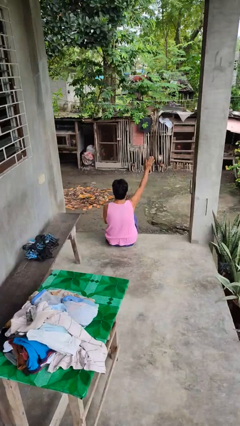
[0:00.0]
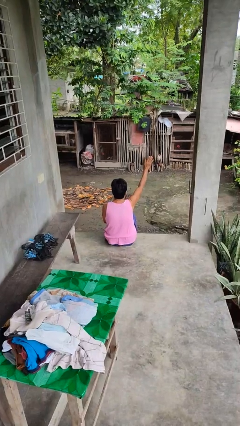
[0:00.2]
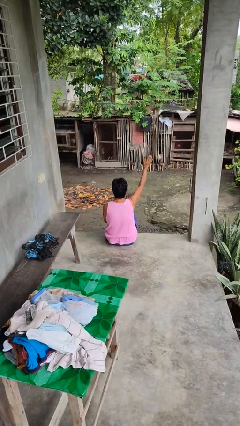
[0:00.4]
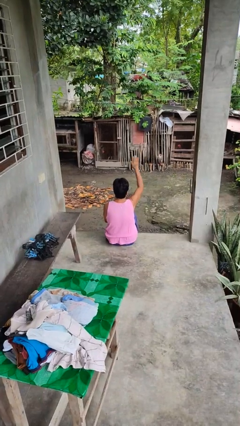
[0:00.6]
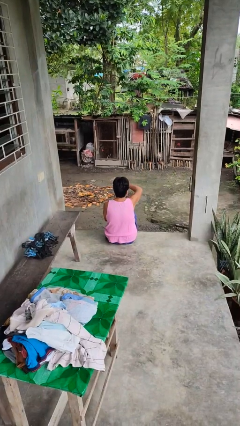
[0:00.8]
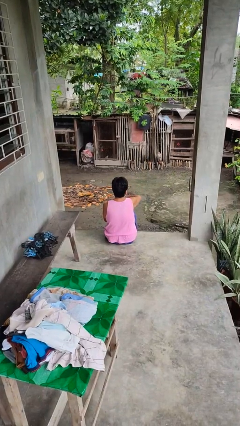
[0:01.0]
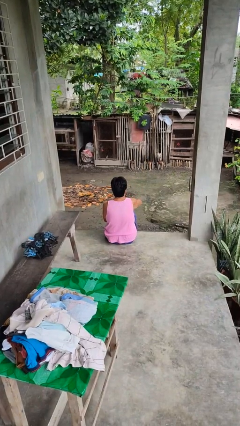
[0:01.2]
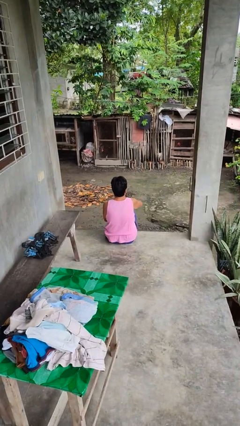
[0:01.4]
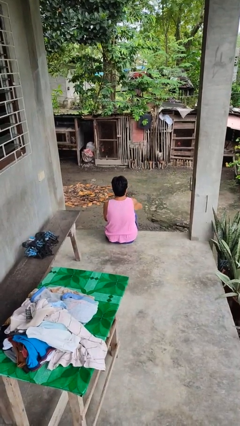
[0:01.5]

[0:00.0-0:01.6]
person gestures swipe down

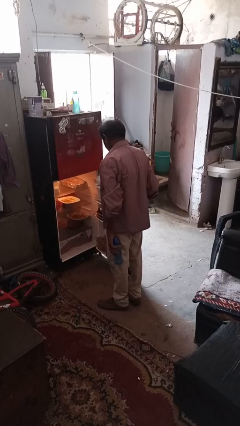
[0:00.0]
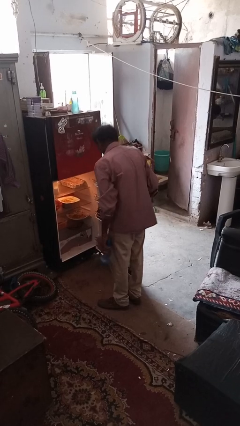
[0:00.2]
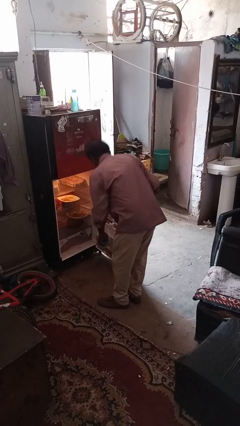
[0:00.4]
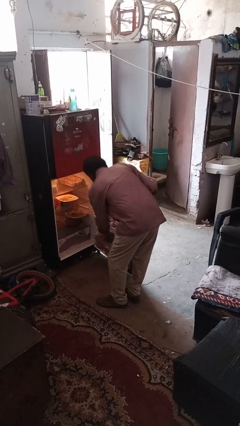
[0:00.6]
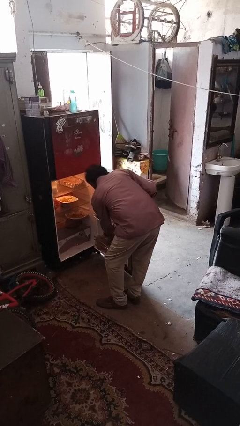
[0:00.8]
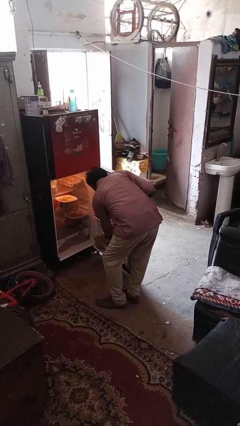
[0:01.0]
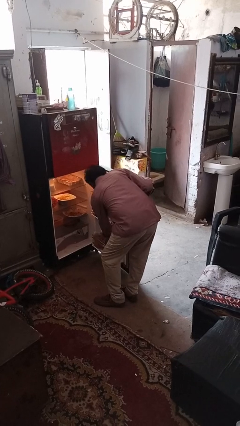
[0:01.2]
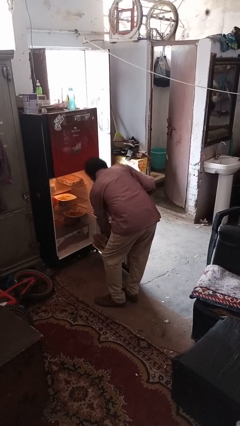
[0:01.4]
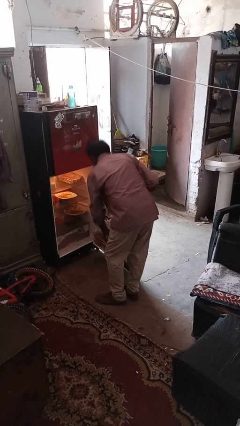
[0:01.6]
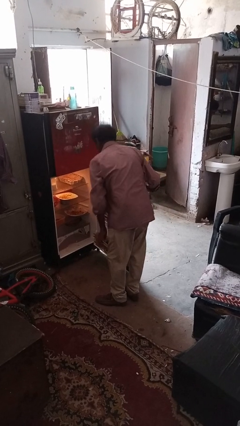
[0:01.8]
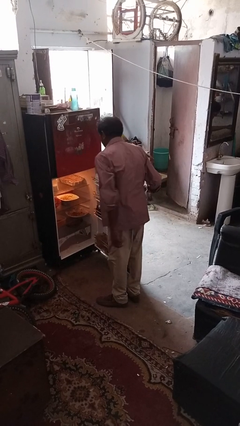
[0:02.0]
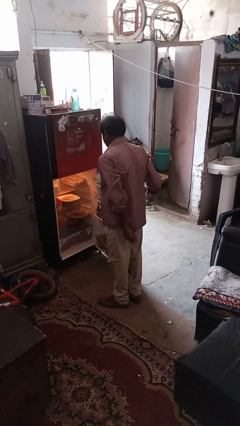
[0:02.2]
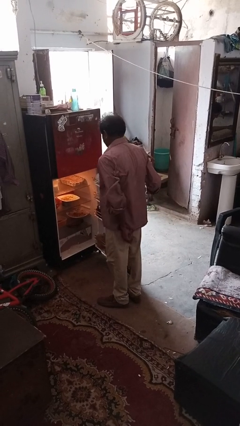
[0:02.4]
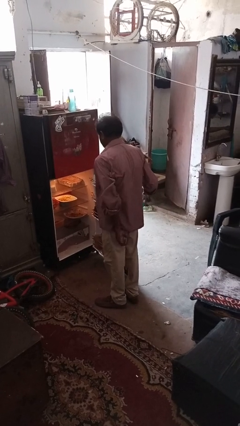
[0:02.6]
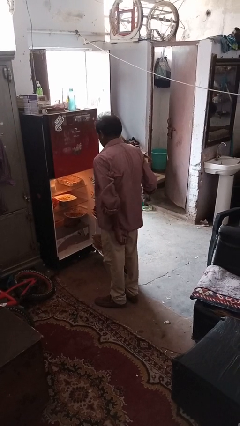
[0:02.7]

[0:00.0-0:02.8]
person puts object into refrigerator

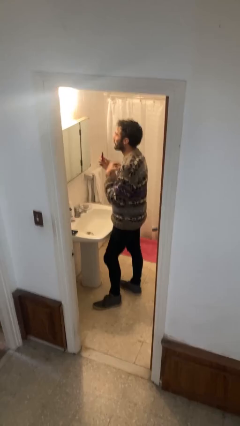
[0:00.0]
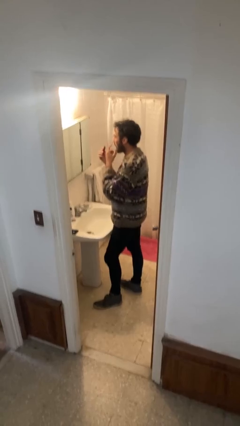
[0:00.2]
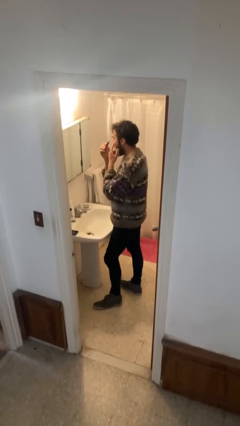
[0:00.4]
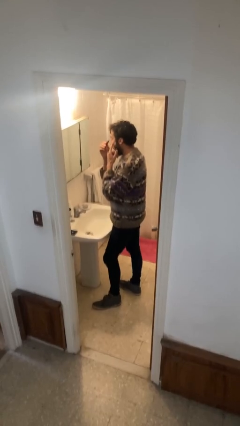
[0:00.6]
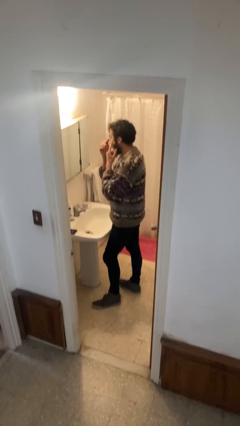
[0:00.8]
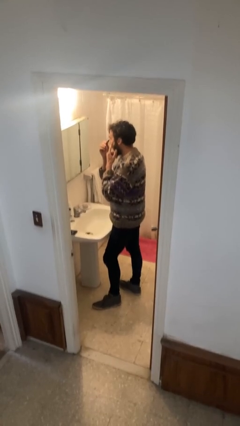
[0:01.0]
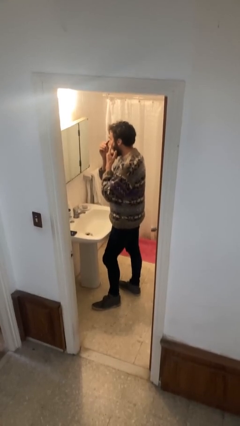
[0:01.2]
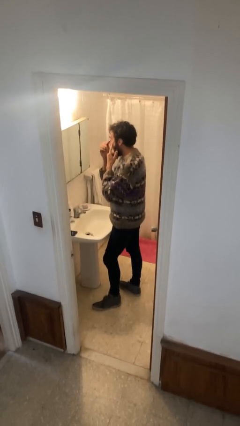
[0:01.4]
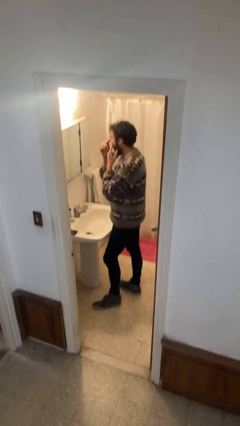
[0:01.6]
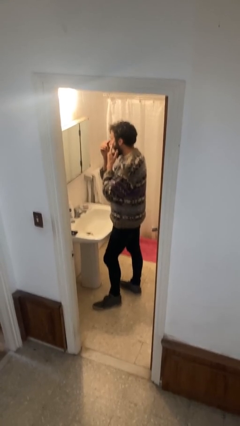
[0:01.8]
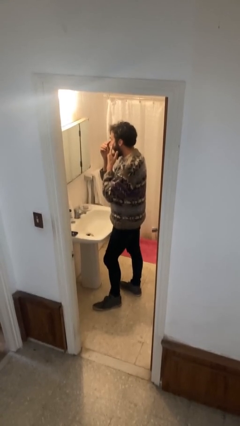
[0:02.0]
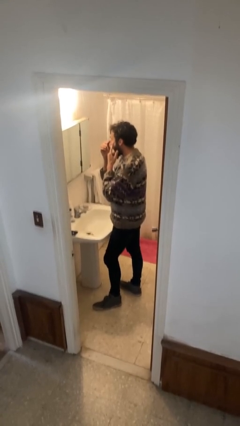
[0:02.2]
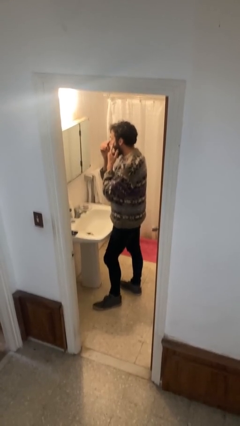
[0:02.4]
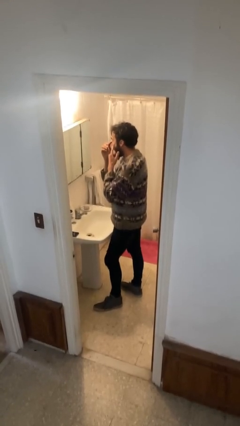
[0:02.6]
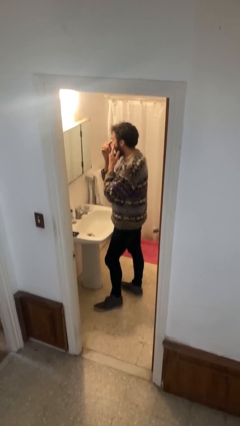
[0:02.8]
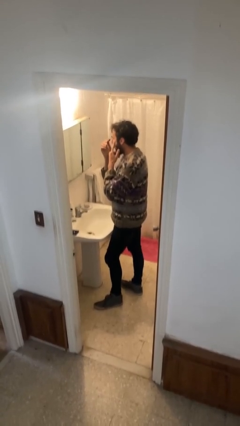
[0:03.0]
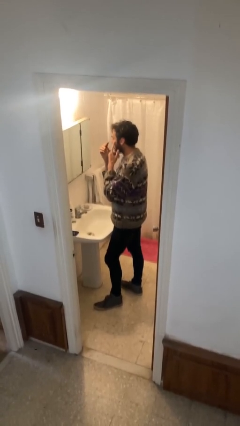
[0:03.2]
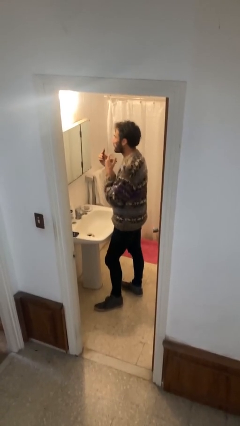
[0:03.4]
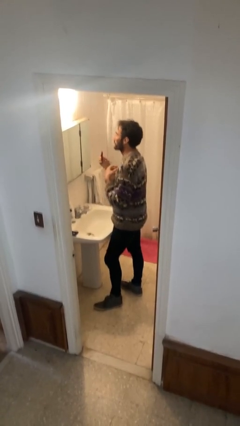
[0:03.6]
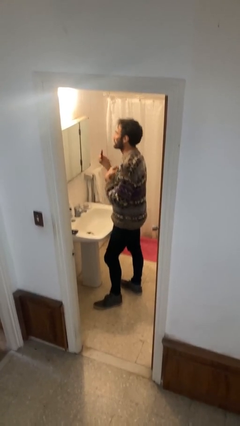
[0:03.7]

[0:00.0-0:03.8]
person applies eye makeup

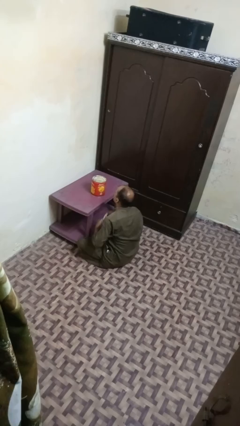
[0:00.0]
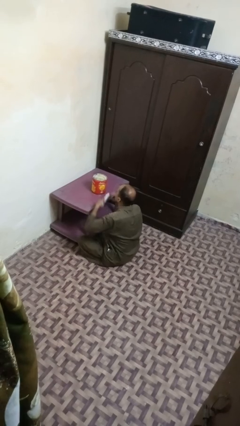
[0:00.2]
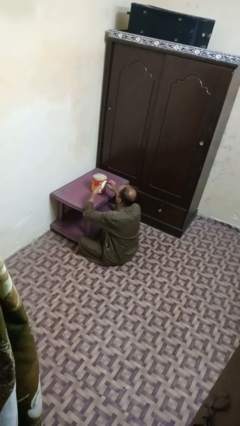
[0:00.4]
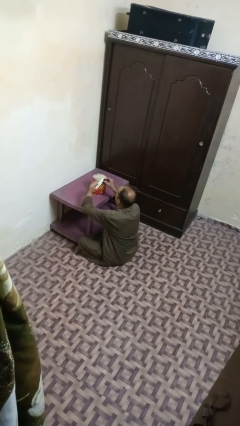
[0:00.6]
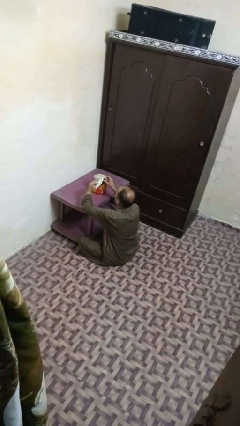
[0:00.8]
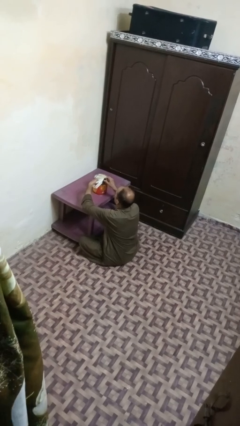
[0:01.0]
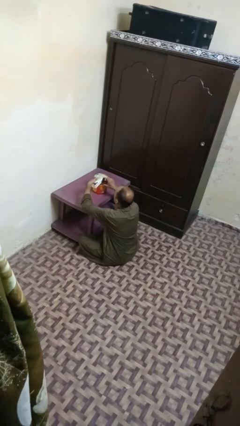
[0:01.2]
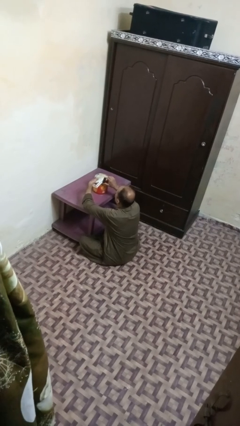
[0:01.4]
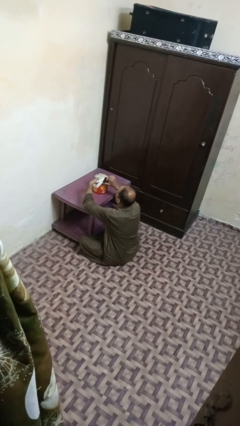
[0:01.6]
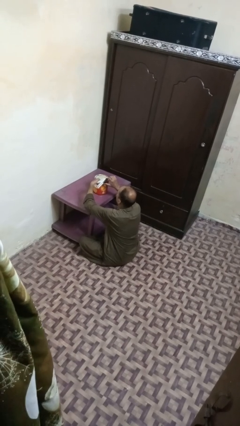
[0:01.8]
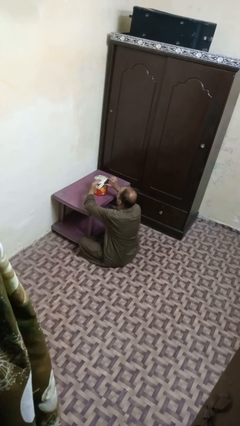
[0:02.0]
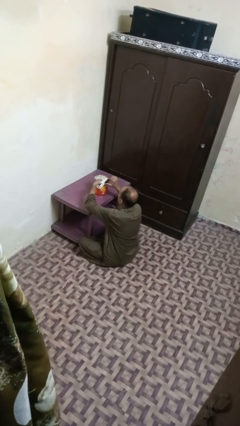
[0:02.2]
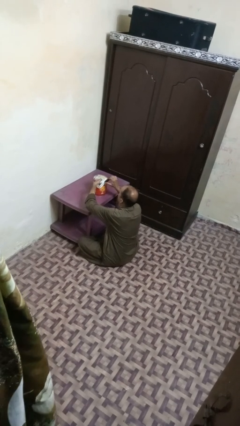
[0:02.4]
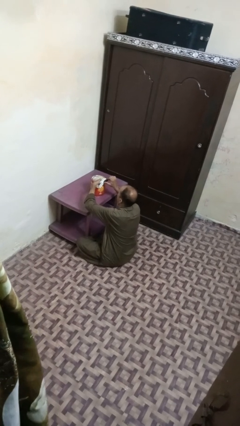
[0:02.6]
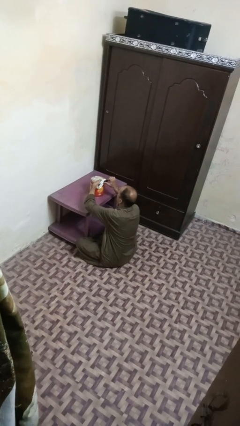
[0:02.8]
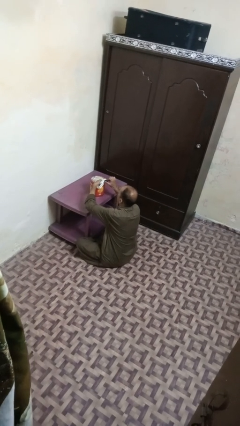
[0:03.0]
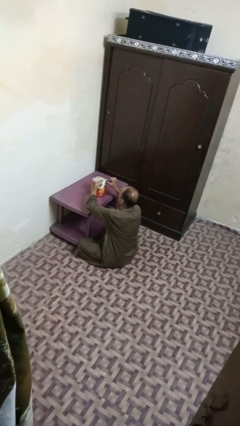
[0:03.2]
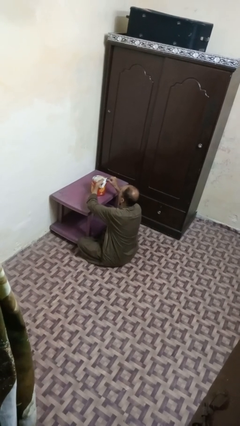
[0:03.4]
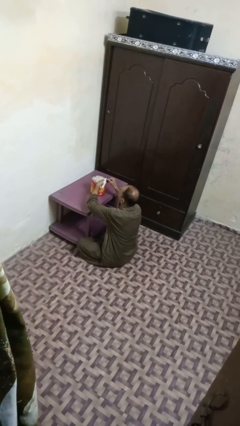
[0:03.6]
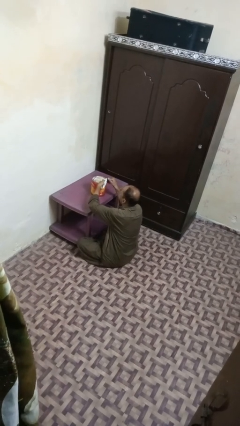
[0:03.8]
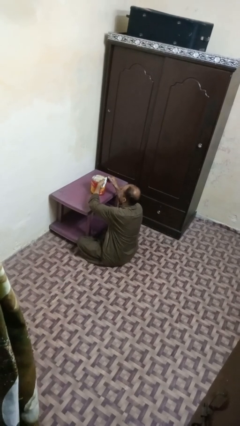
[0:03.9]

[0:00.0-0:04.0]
person opens can with can opener

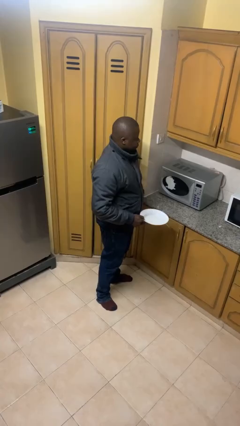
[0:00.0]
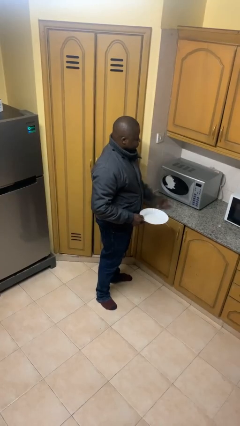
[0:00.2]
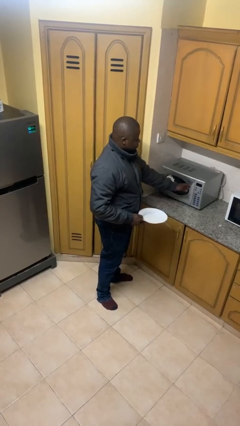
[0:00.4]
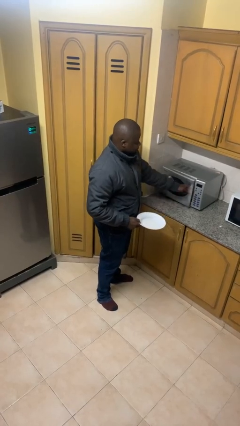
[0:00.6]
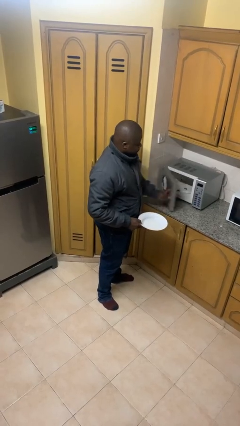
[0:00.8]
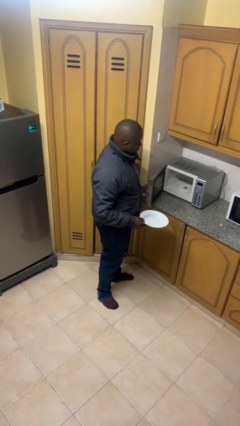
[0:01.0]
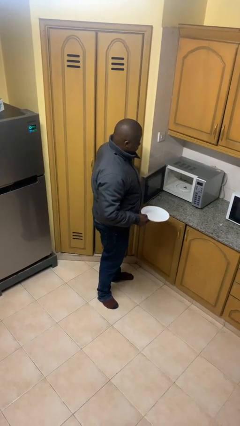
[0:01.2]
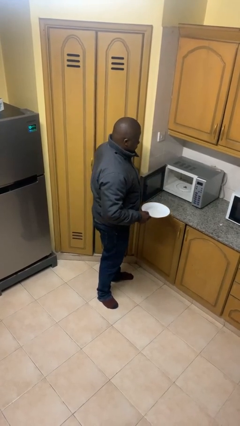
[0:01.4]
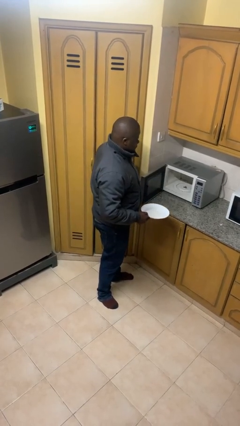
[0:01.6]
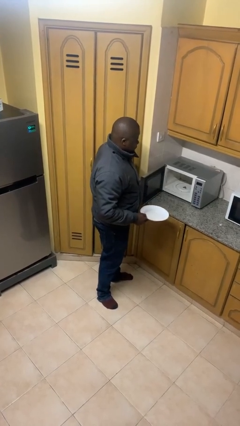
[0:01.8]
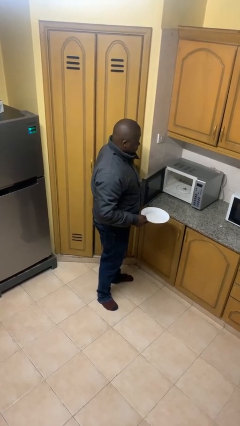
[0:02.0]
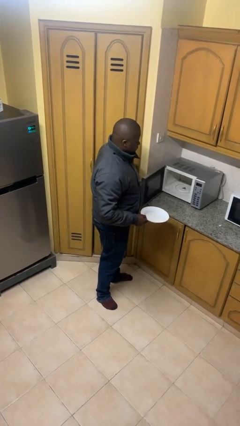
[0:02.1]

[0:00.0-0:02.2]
person opens microwave

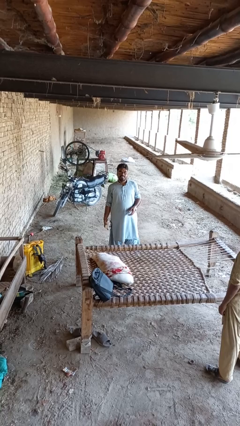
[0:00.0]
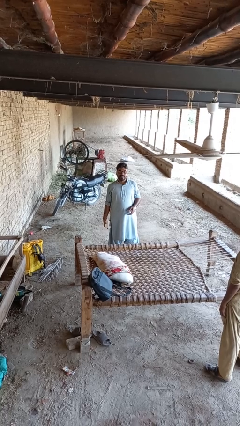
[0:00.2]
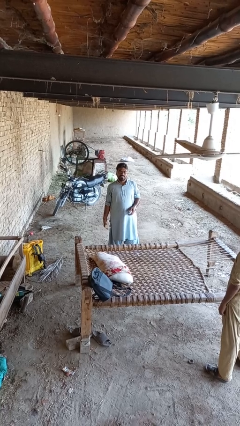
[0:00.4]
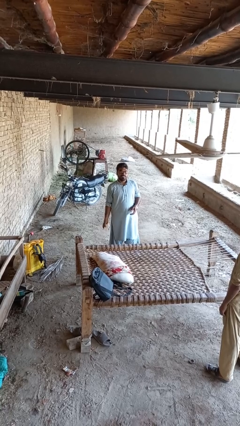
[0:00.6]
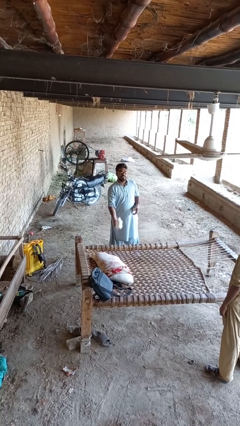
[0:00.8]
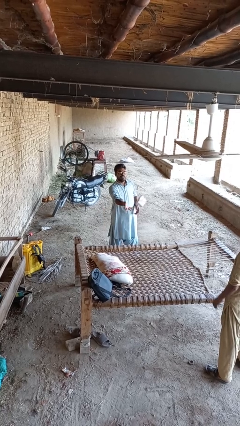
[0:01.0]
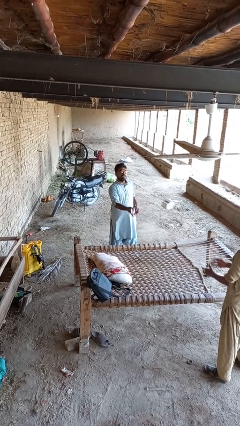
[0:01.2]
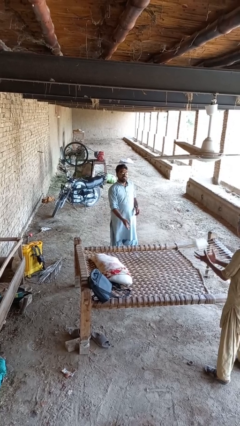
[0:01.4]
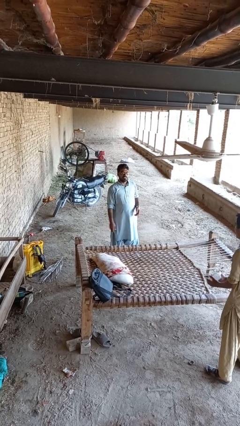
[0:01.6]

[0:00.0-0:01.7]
person throws object to person

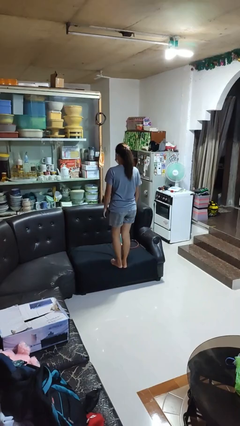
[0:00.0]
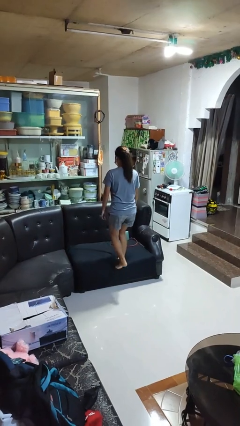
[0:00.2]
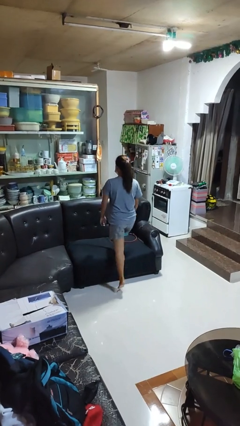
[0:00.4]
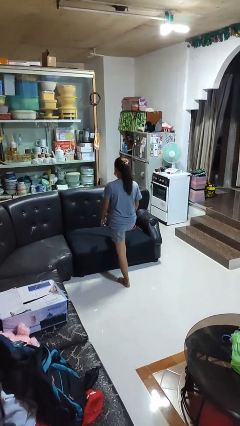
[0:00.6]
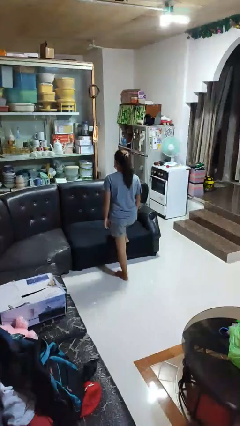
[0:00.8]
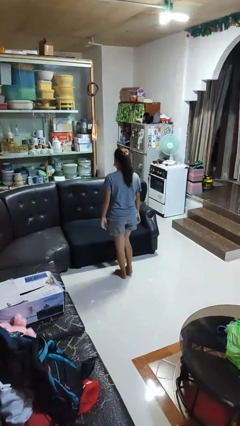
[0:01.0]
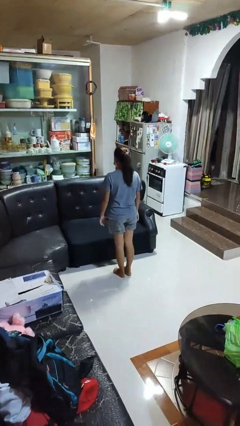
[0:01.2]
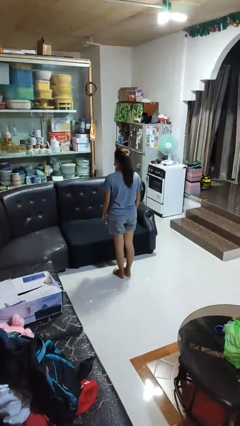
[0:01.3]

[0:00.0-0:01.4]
person climbs off couch
